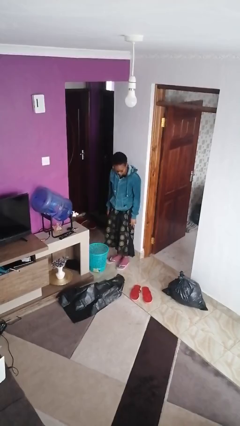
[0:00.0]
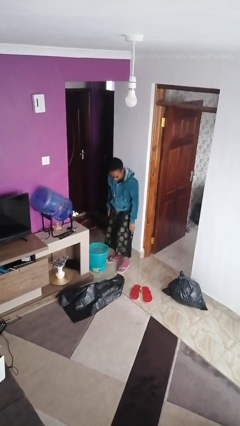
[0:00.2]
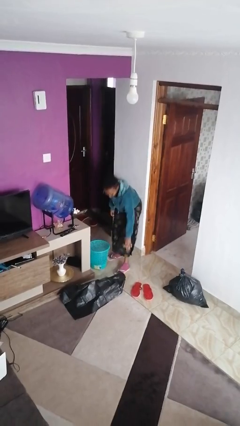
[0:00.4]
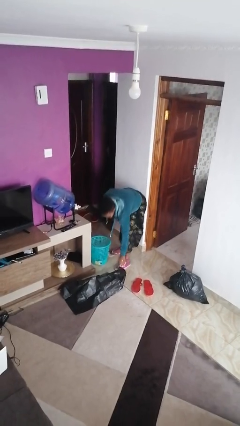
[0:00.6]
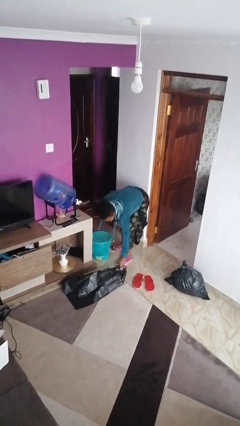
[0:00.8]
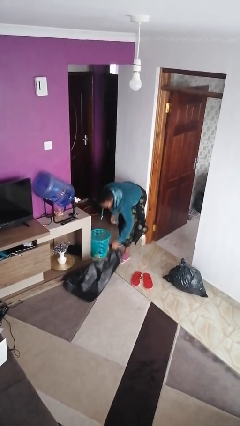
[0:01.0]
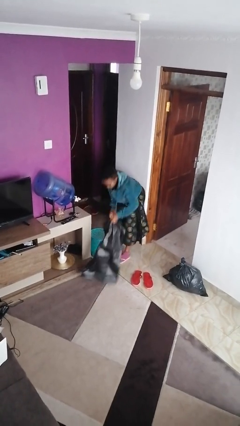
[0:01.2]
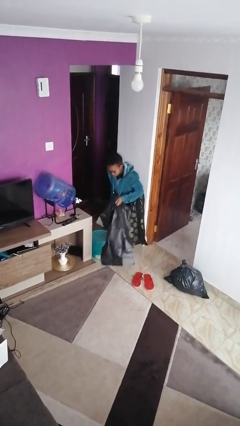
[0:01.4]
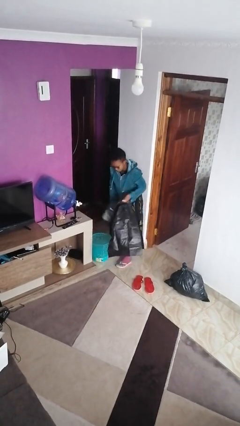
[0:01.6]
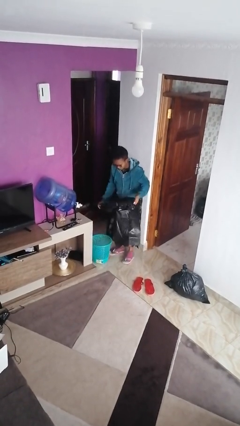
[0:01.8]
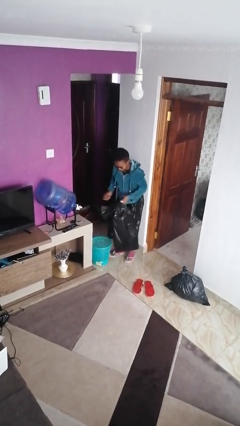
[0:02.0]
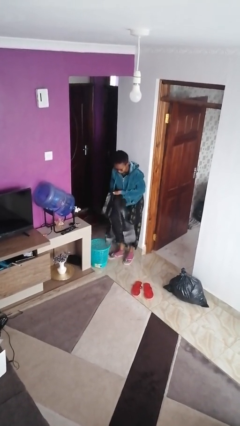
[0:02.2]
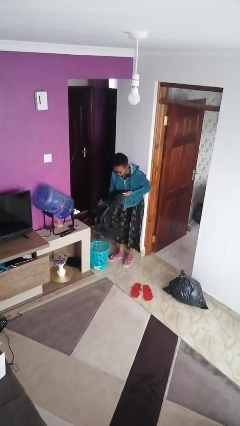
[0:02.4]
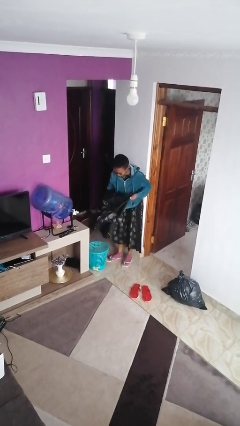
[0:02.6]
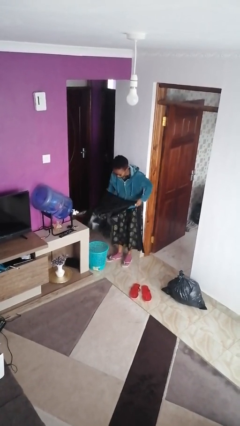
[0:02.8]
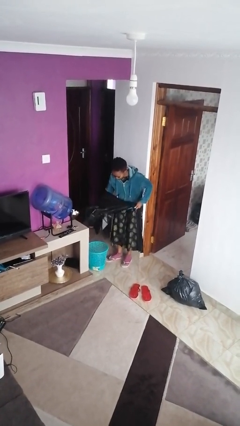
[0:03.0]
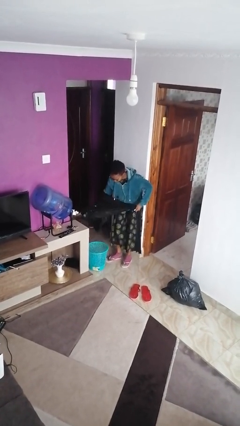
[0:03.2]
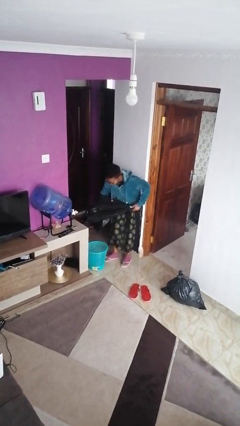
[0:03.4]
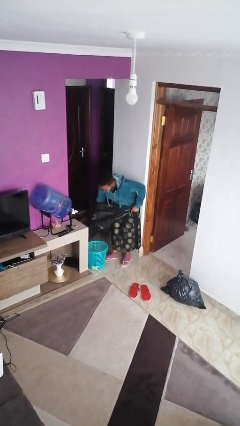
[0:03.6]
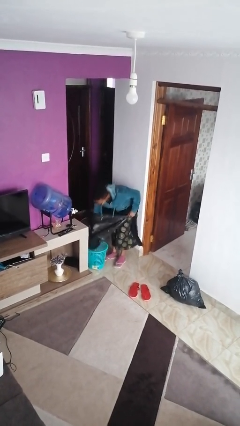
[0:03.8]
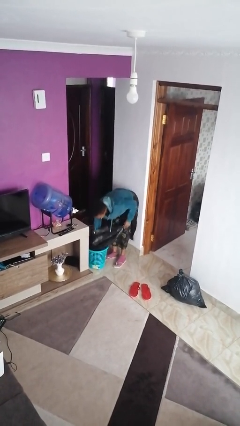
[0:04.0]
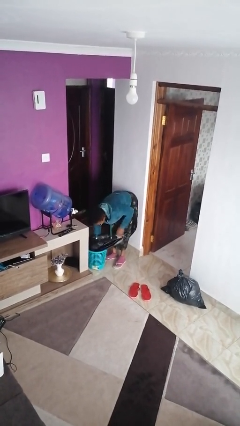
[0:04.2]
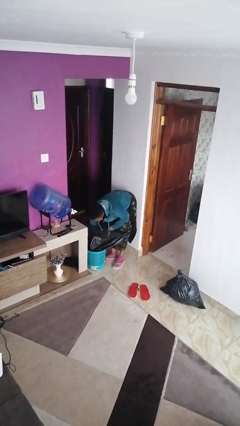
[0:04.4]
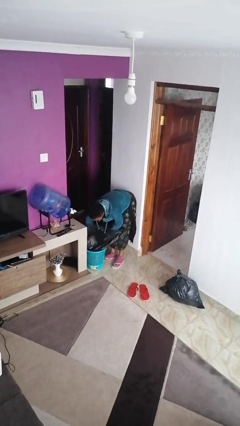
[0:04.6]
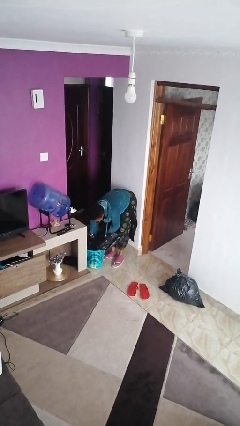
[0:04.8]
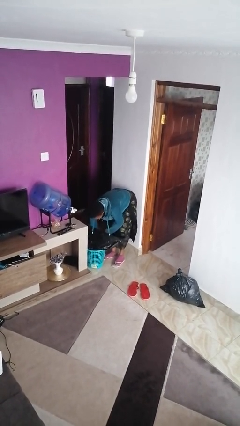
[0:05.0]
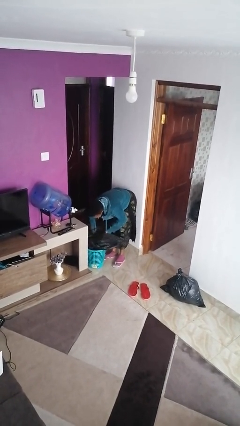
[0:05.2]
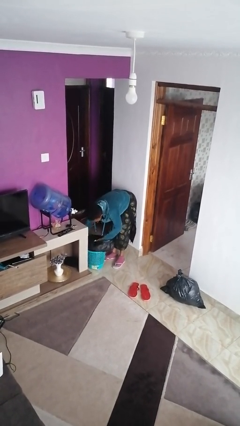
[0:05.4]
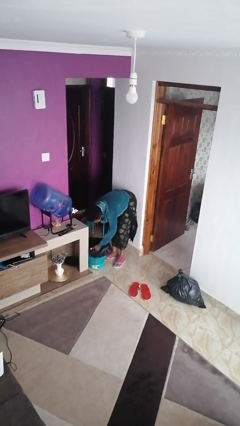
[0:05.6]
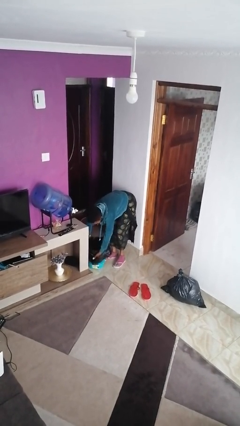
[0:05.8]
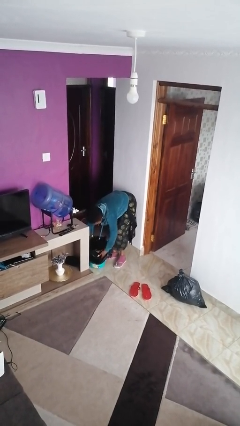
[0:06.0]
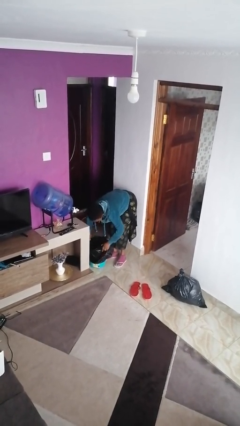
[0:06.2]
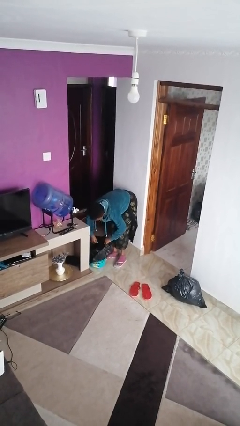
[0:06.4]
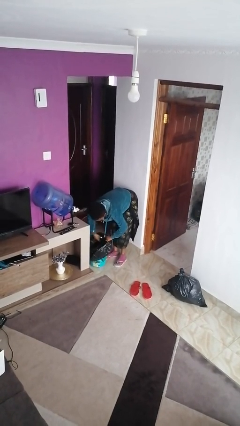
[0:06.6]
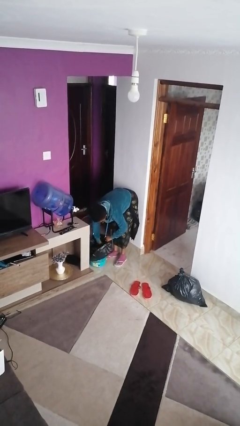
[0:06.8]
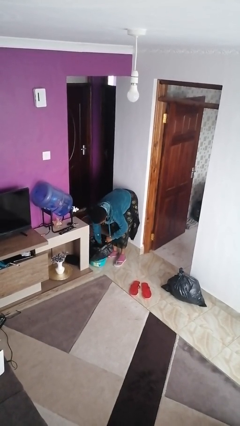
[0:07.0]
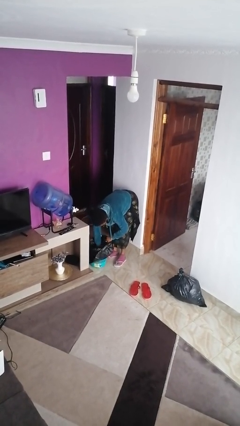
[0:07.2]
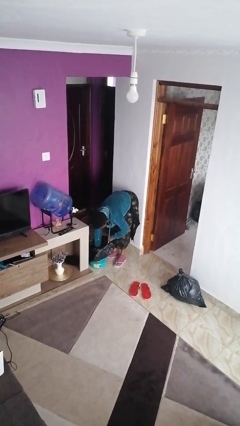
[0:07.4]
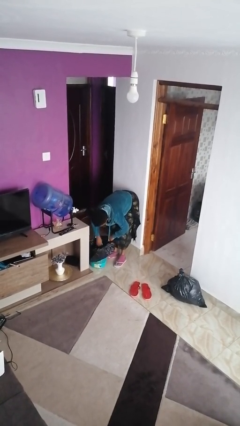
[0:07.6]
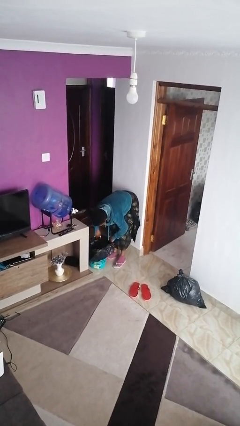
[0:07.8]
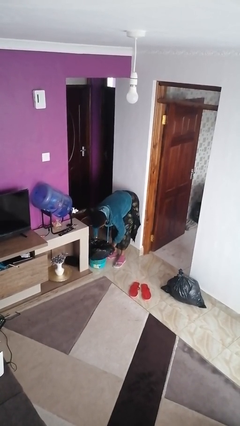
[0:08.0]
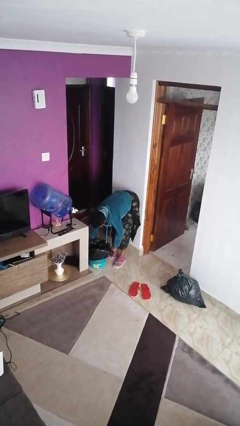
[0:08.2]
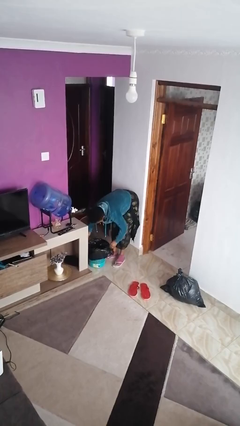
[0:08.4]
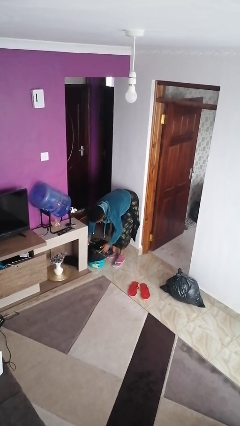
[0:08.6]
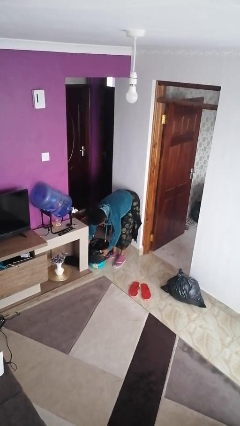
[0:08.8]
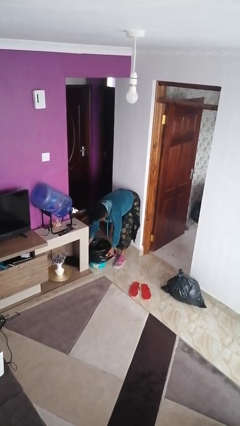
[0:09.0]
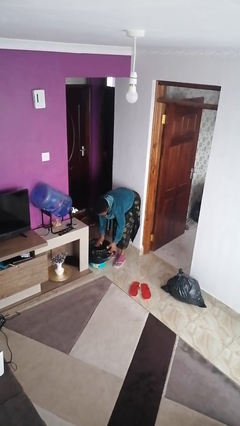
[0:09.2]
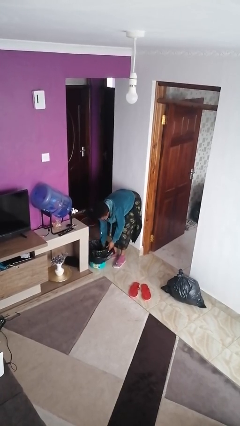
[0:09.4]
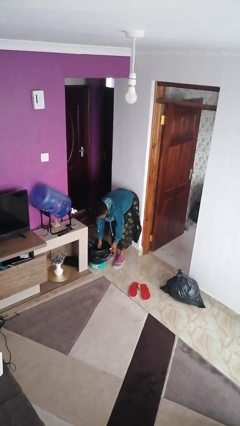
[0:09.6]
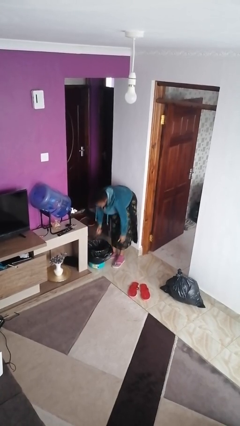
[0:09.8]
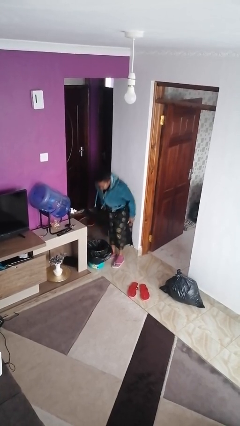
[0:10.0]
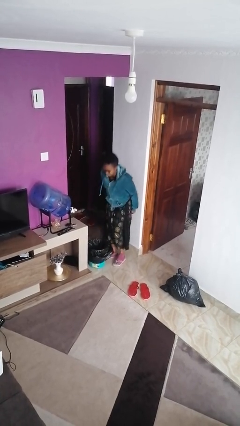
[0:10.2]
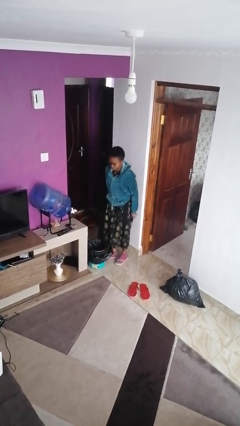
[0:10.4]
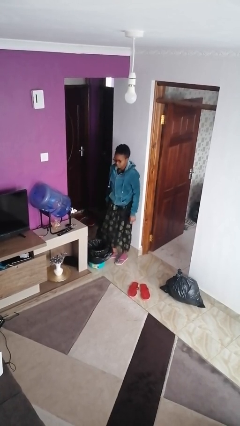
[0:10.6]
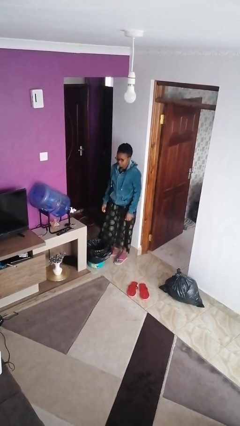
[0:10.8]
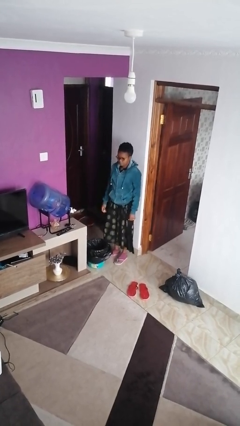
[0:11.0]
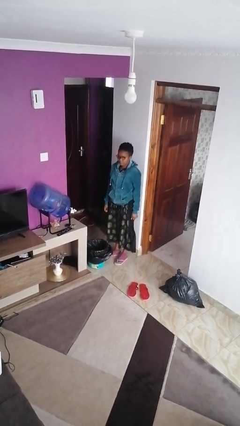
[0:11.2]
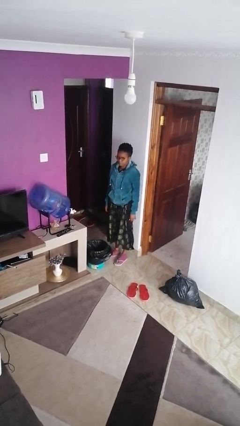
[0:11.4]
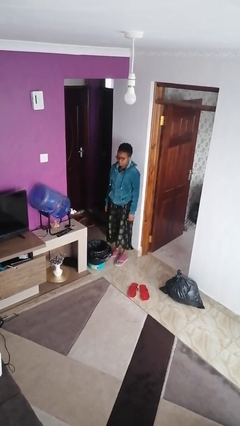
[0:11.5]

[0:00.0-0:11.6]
person inserts trashbag into trashcan

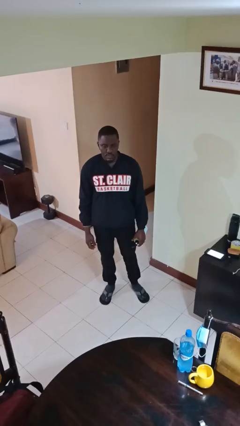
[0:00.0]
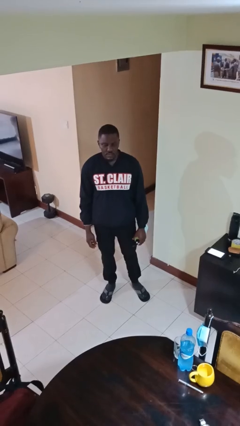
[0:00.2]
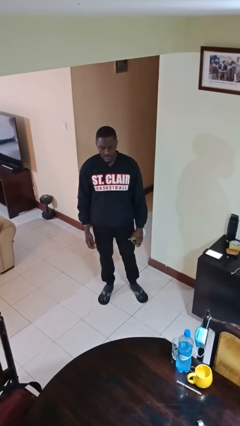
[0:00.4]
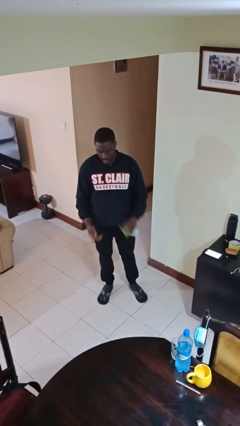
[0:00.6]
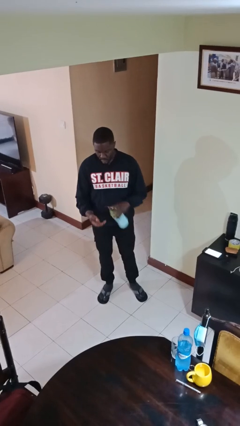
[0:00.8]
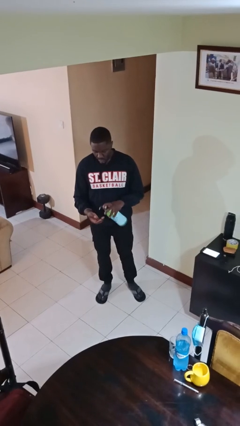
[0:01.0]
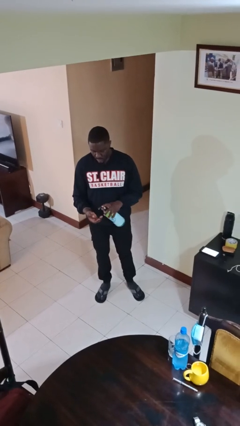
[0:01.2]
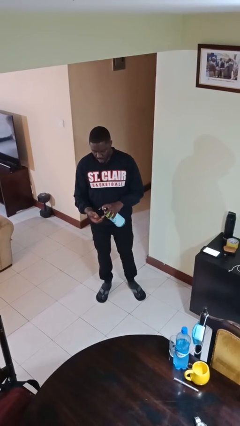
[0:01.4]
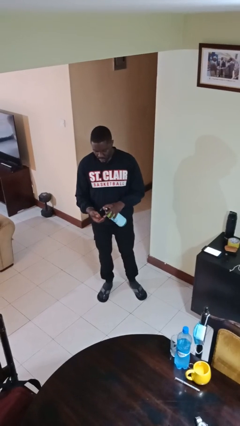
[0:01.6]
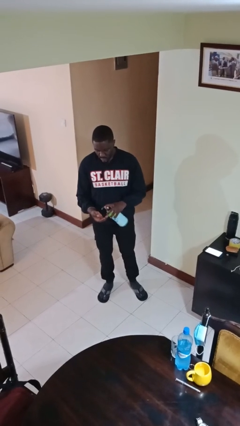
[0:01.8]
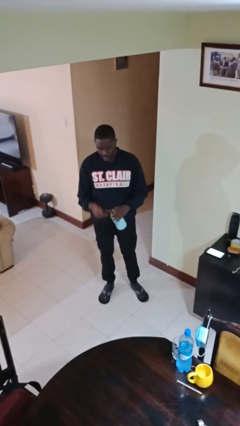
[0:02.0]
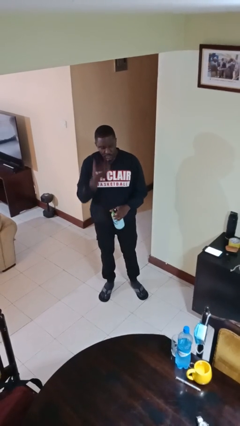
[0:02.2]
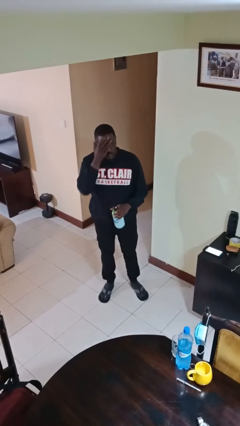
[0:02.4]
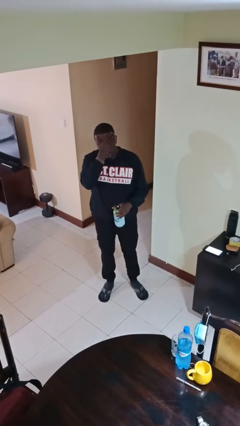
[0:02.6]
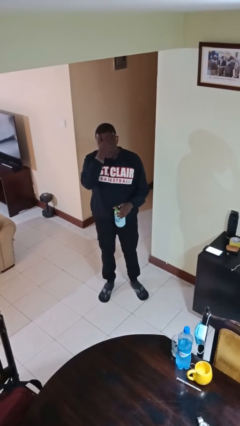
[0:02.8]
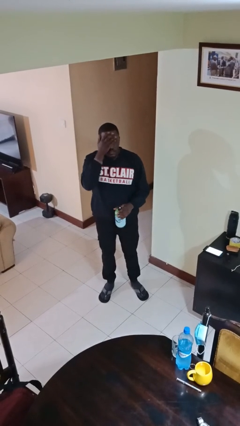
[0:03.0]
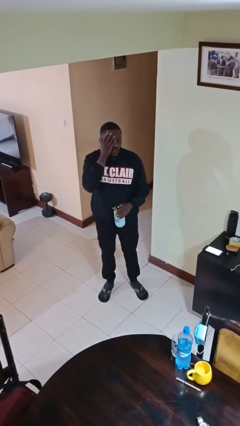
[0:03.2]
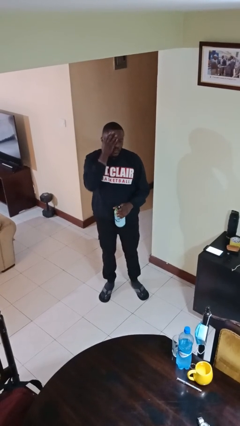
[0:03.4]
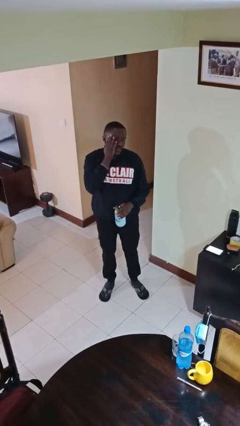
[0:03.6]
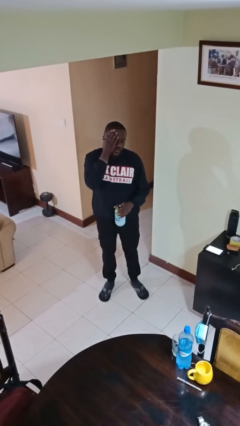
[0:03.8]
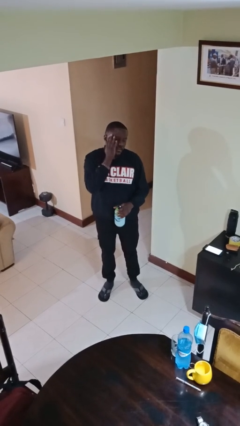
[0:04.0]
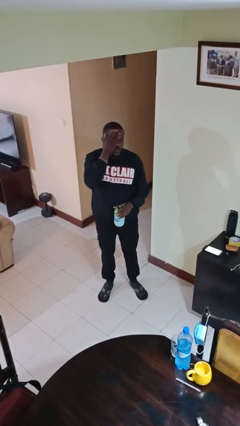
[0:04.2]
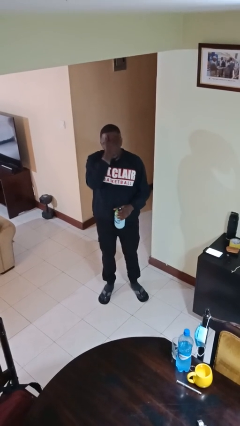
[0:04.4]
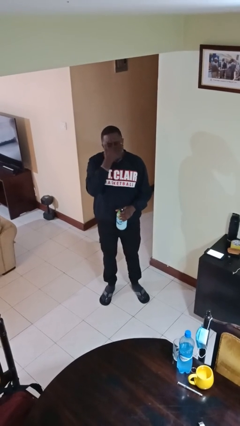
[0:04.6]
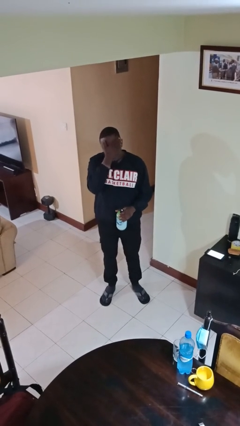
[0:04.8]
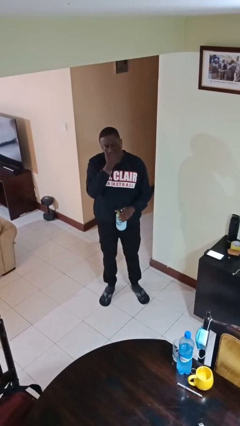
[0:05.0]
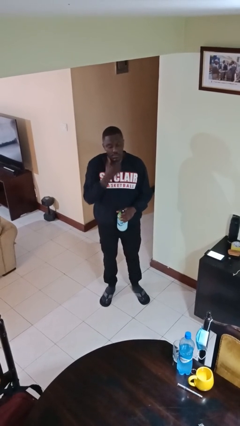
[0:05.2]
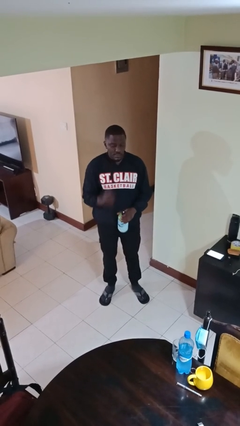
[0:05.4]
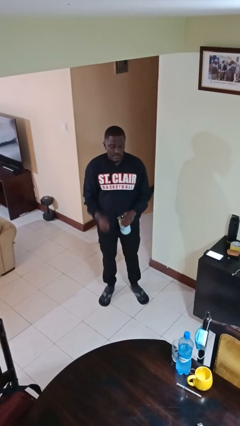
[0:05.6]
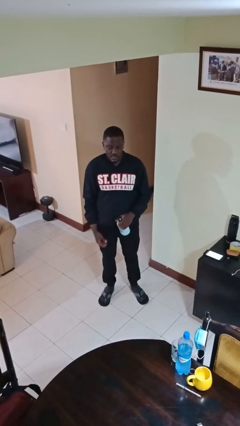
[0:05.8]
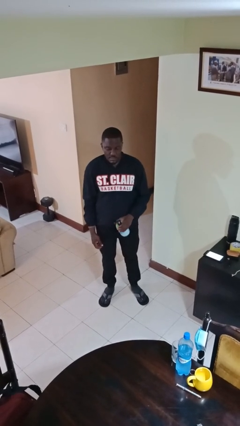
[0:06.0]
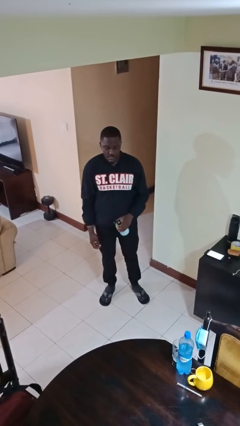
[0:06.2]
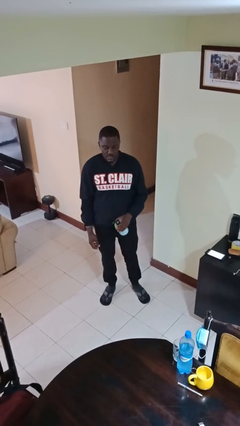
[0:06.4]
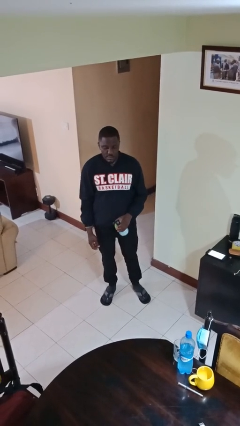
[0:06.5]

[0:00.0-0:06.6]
person applies facial moisturizer

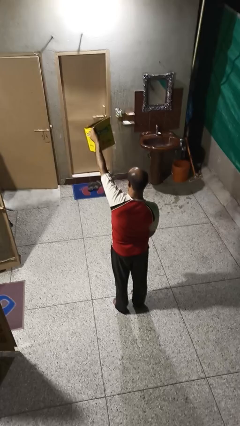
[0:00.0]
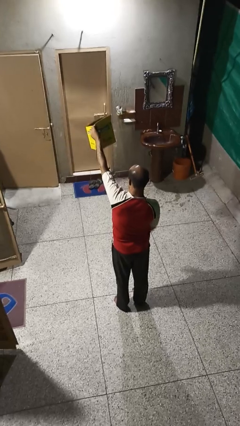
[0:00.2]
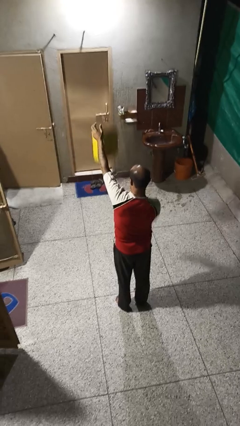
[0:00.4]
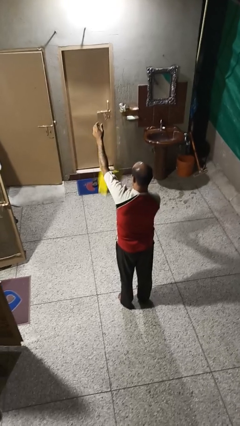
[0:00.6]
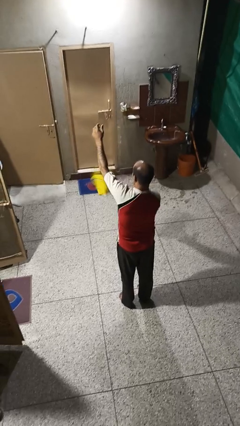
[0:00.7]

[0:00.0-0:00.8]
person drops object
